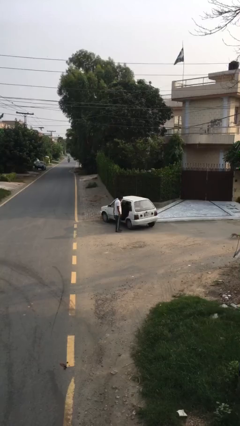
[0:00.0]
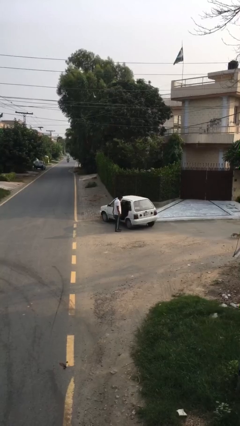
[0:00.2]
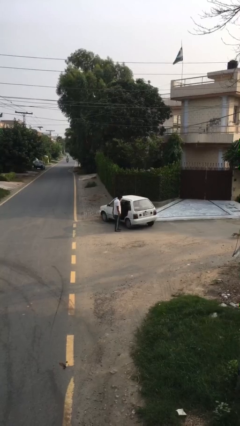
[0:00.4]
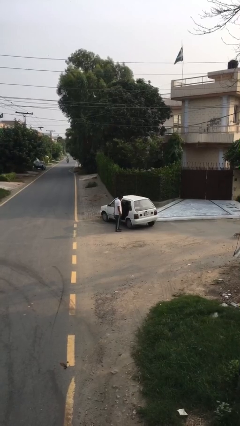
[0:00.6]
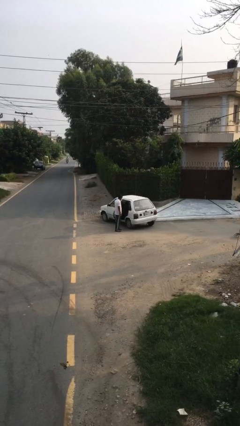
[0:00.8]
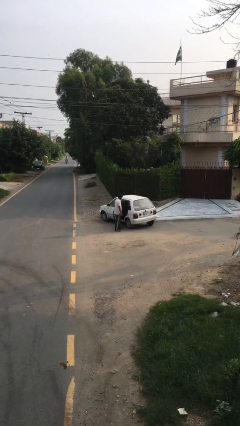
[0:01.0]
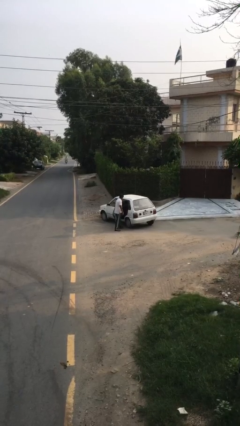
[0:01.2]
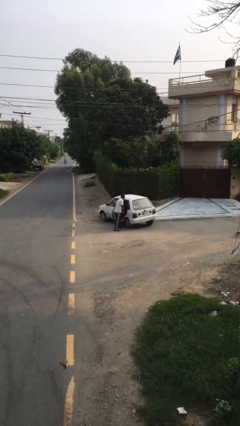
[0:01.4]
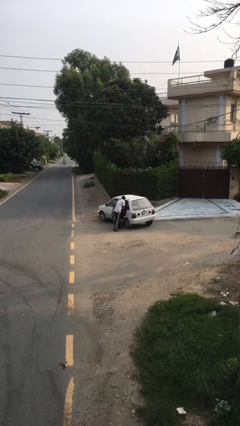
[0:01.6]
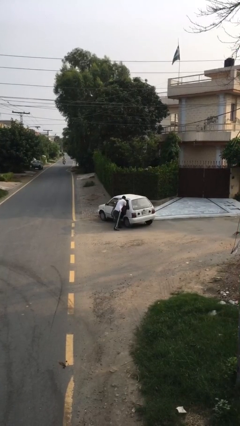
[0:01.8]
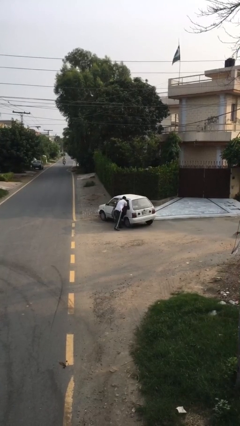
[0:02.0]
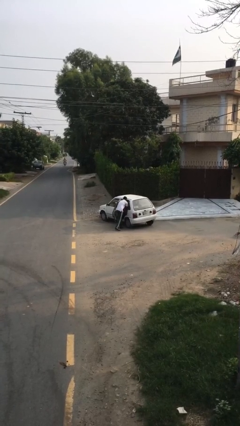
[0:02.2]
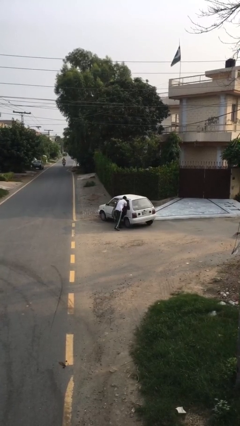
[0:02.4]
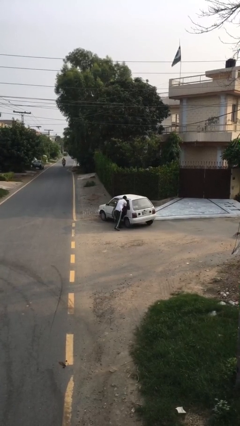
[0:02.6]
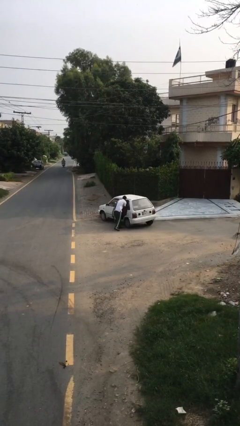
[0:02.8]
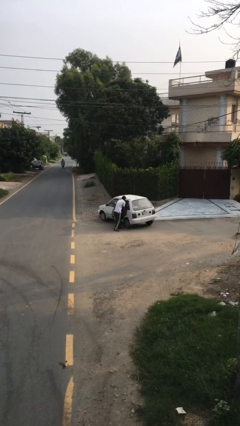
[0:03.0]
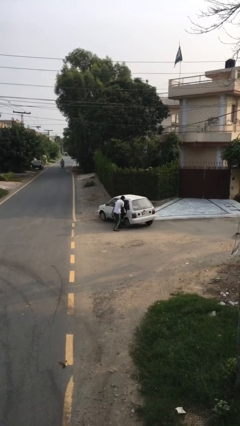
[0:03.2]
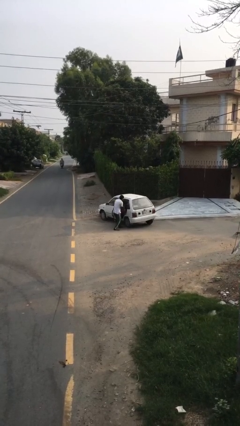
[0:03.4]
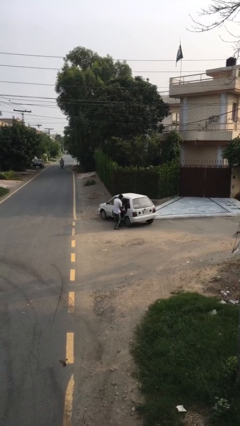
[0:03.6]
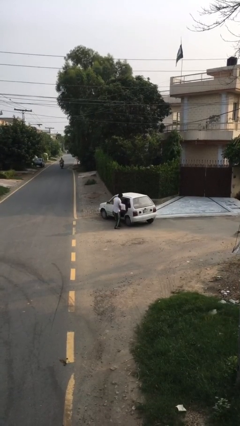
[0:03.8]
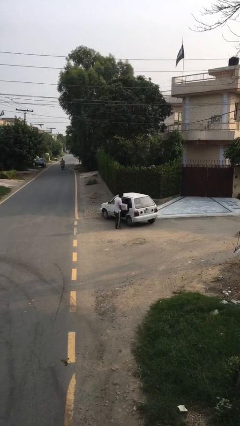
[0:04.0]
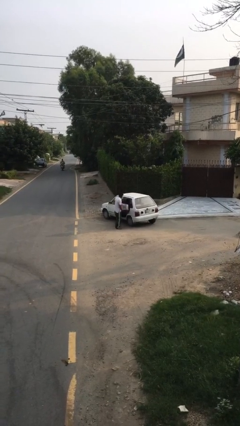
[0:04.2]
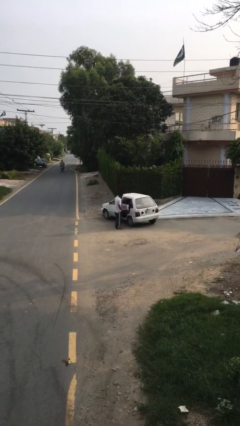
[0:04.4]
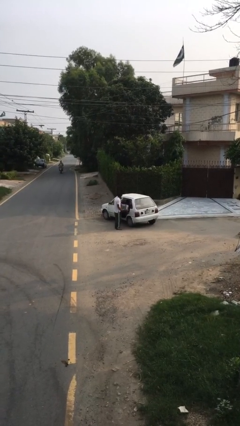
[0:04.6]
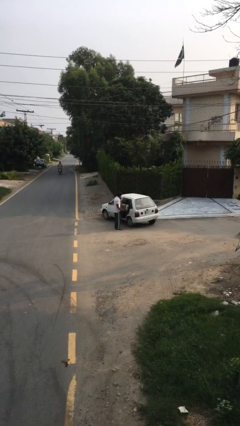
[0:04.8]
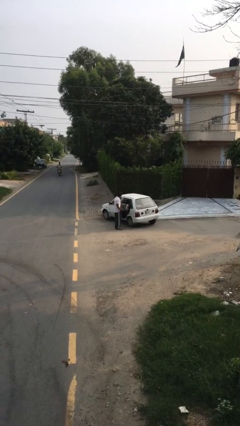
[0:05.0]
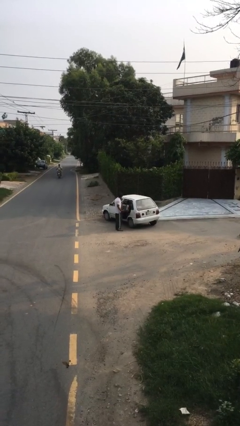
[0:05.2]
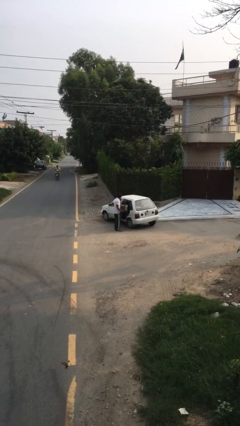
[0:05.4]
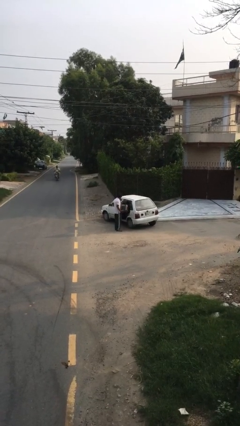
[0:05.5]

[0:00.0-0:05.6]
person unloads car

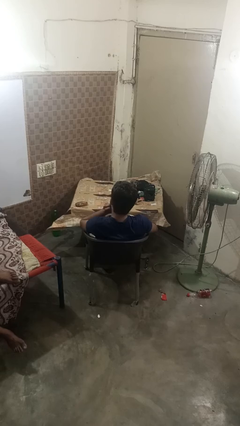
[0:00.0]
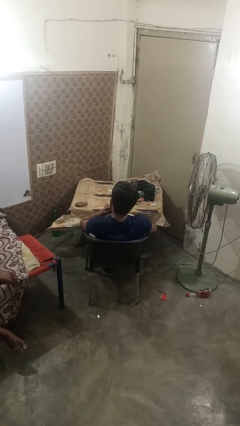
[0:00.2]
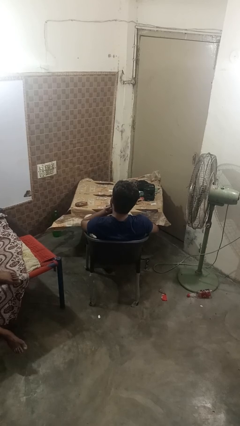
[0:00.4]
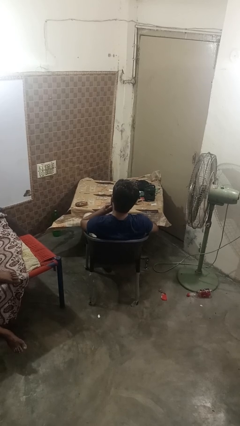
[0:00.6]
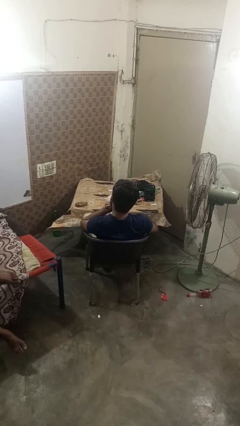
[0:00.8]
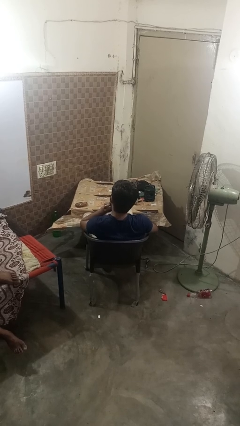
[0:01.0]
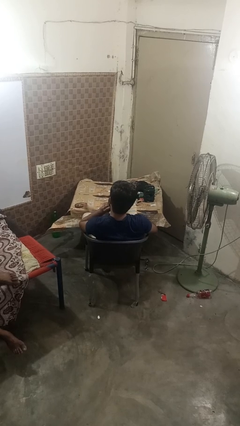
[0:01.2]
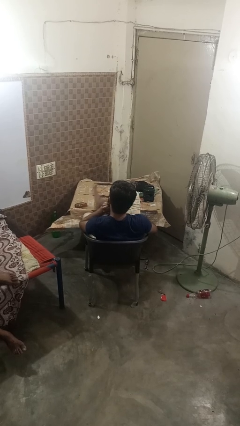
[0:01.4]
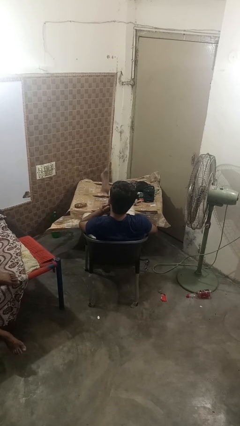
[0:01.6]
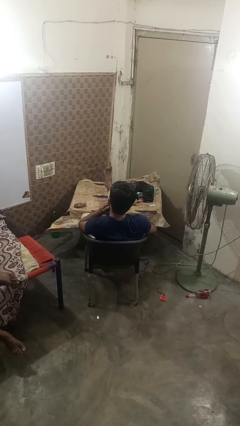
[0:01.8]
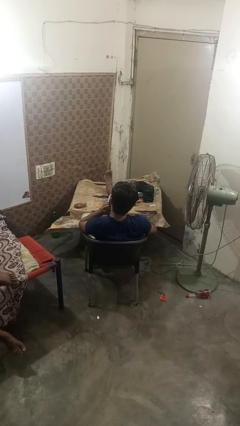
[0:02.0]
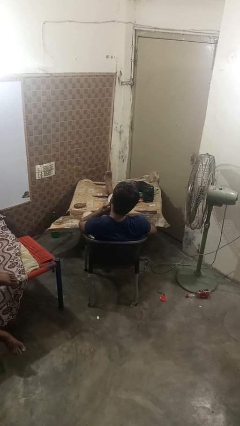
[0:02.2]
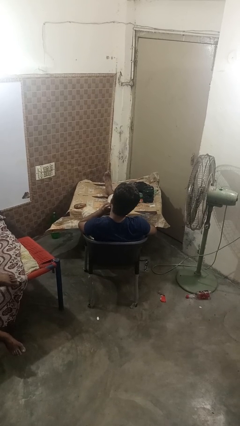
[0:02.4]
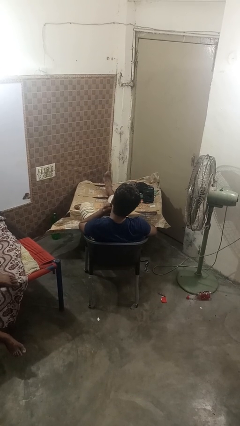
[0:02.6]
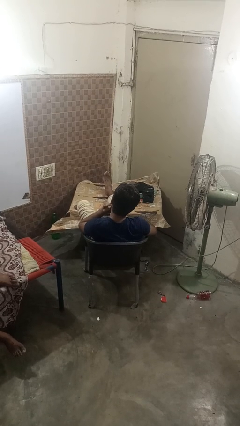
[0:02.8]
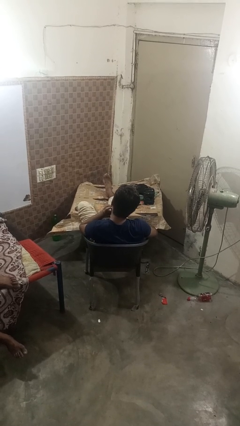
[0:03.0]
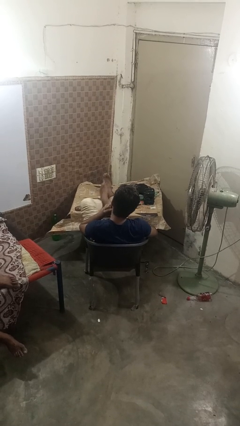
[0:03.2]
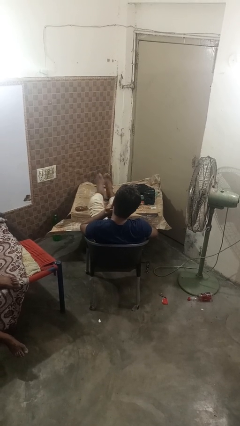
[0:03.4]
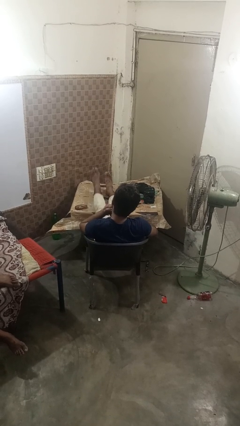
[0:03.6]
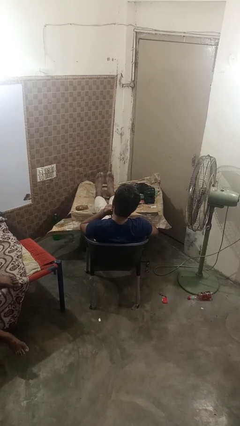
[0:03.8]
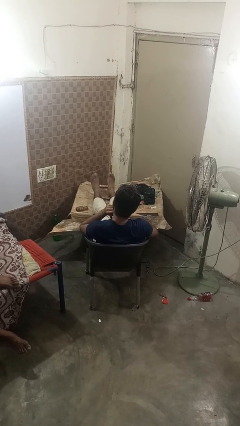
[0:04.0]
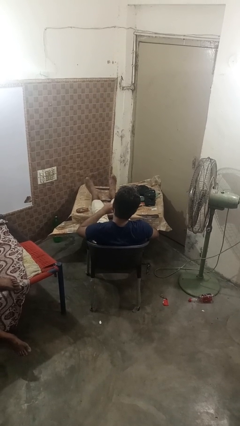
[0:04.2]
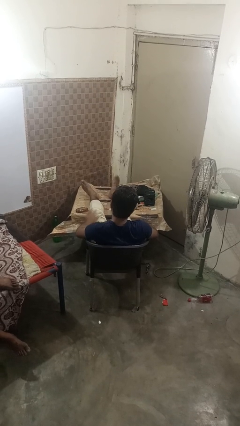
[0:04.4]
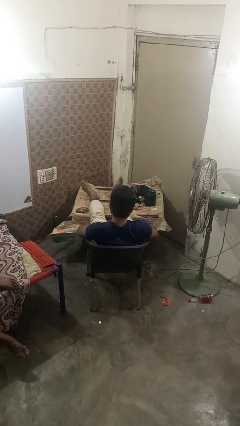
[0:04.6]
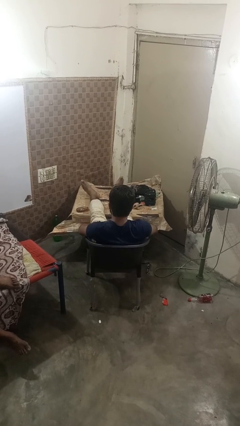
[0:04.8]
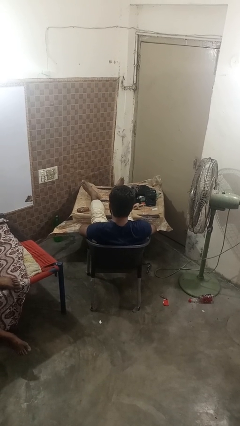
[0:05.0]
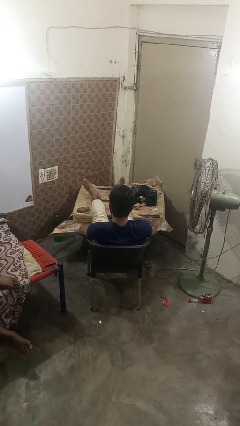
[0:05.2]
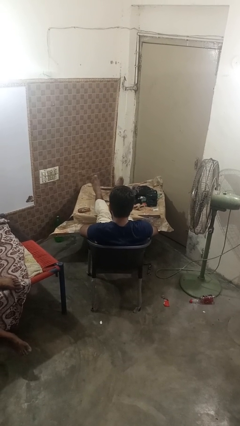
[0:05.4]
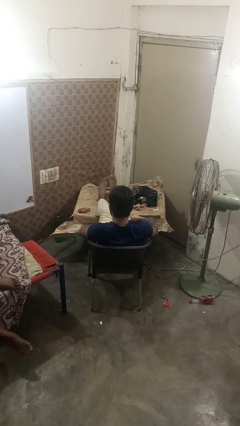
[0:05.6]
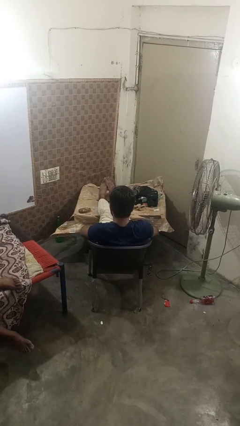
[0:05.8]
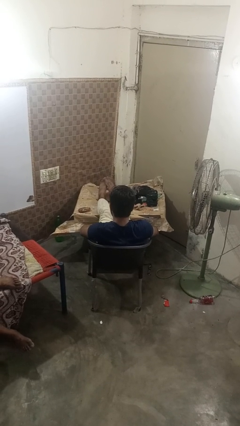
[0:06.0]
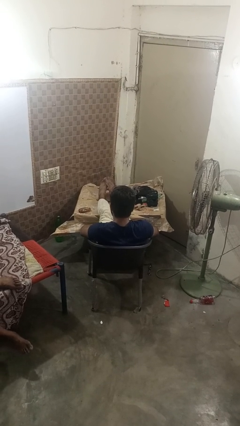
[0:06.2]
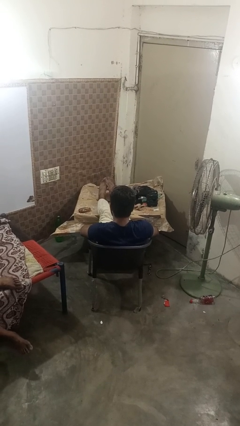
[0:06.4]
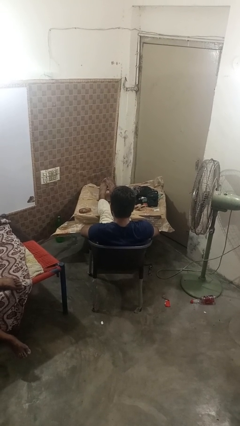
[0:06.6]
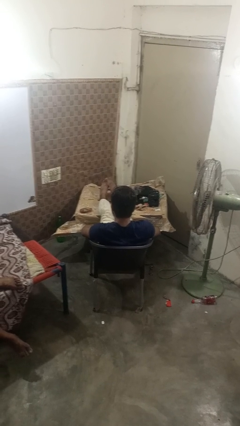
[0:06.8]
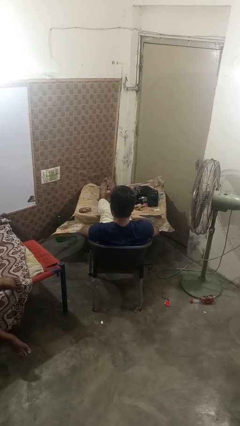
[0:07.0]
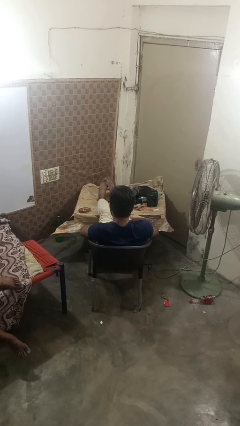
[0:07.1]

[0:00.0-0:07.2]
person puts feet up

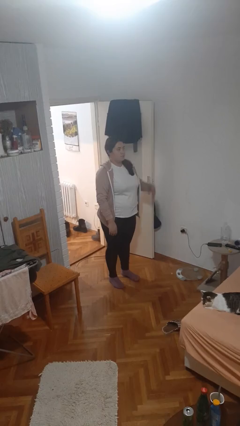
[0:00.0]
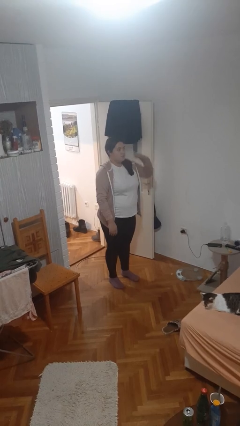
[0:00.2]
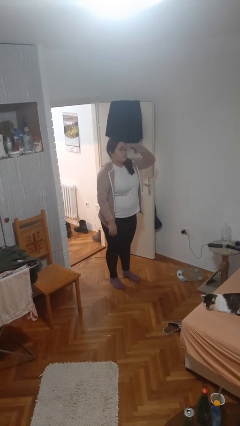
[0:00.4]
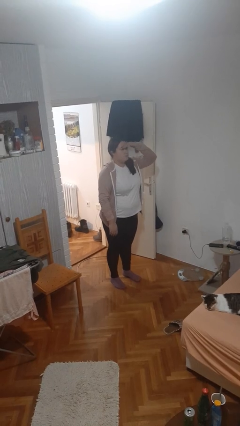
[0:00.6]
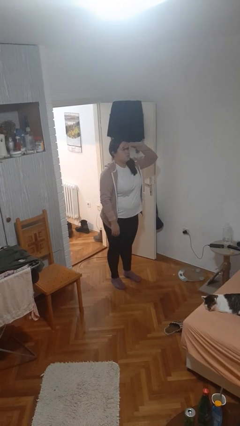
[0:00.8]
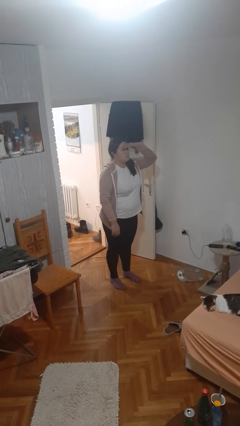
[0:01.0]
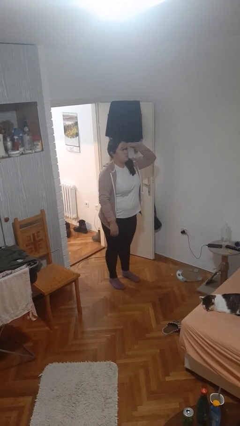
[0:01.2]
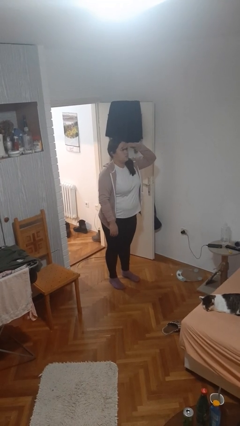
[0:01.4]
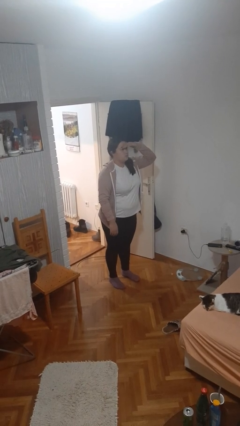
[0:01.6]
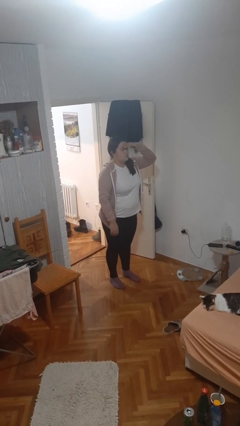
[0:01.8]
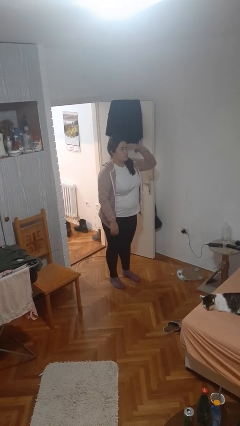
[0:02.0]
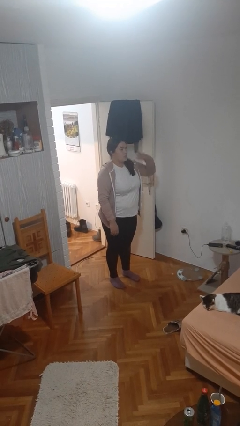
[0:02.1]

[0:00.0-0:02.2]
person shades eyes

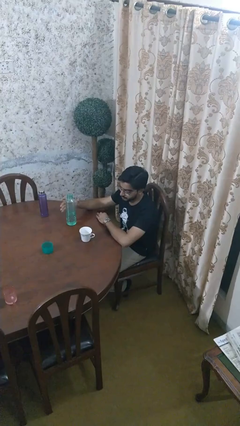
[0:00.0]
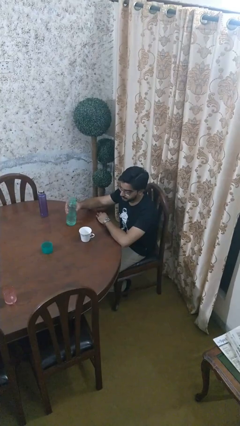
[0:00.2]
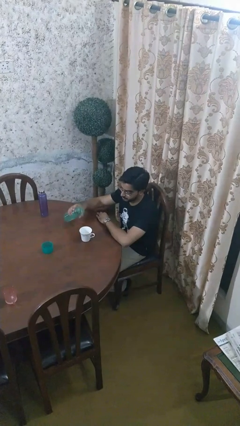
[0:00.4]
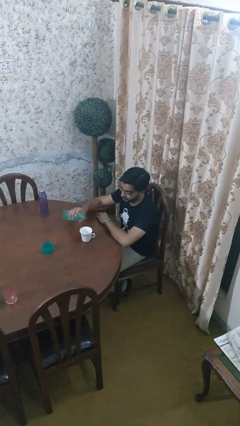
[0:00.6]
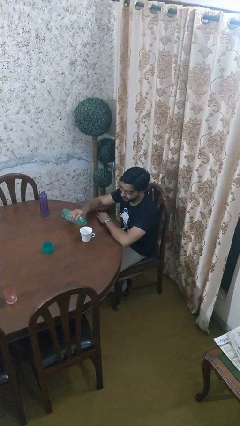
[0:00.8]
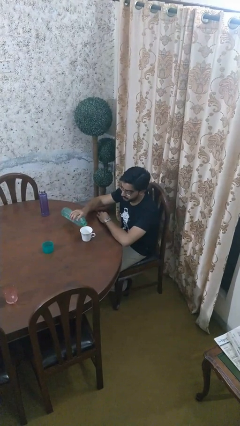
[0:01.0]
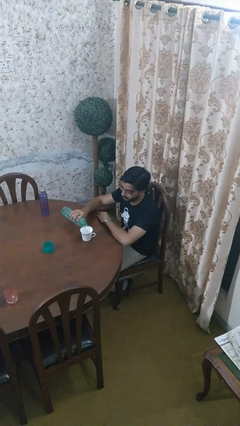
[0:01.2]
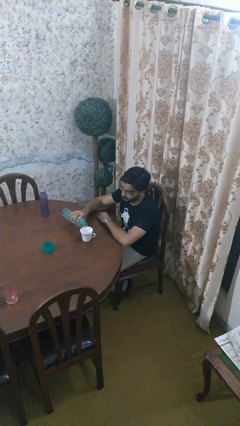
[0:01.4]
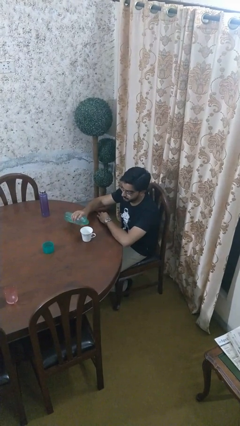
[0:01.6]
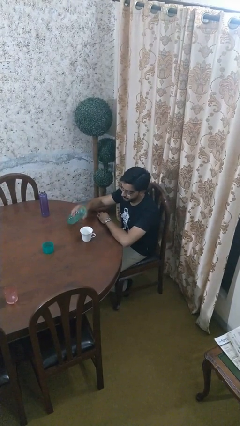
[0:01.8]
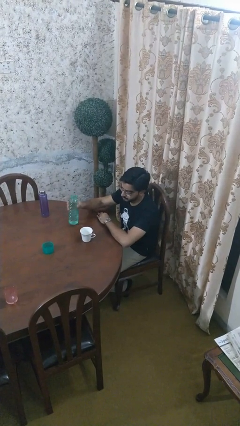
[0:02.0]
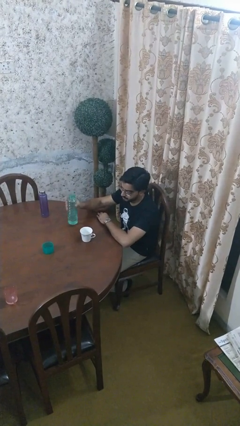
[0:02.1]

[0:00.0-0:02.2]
person pours liquid into cup

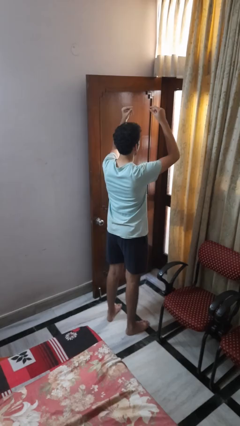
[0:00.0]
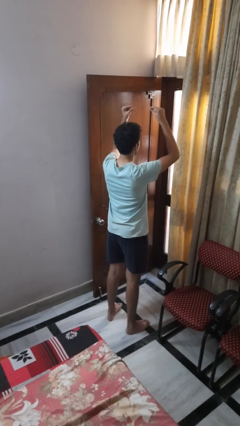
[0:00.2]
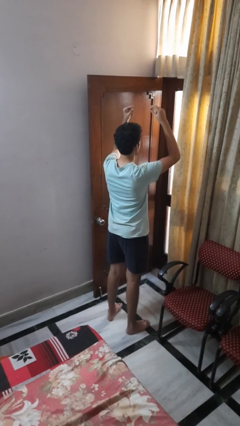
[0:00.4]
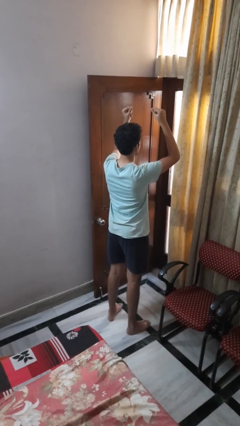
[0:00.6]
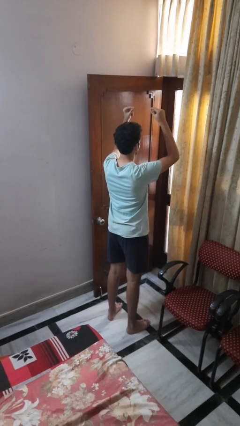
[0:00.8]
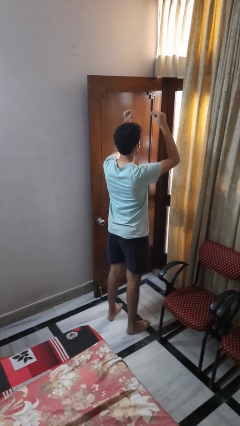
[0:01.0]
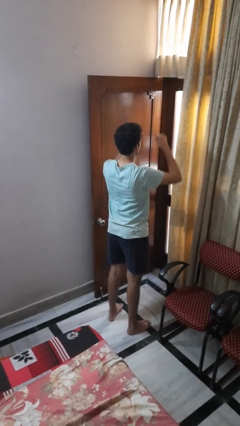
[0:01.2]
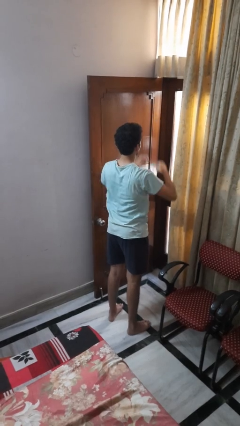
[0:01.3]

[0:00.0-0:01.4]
person snaps fingers
